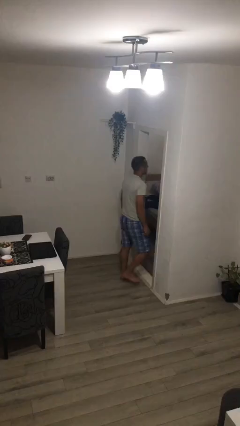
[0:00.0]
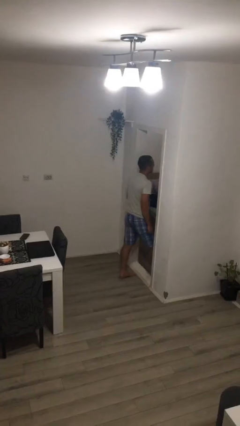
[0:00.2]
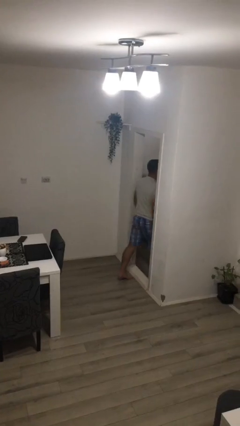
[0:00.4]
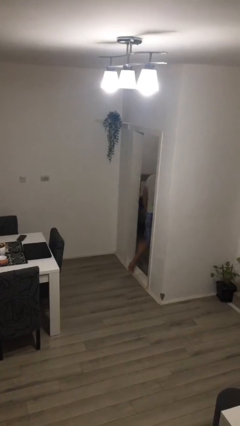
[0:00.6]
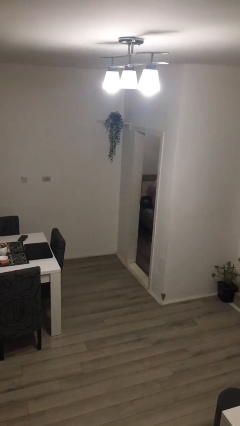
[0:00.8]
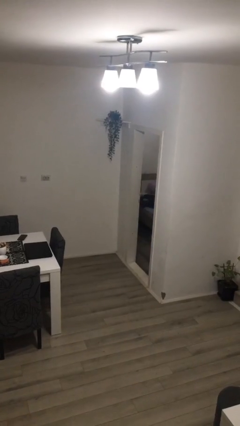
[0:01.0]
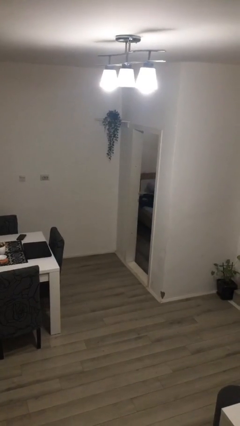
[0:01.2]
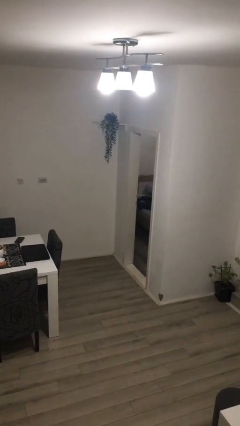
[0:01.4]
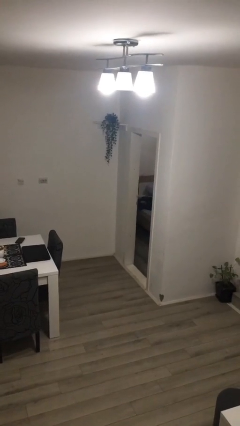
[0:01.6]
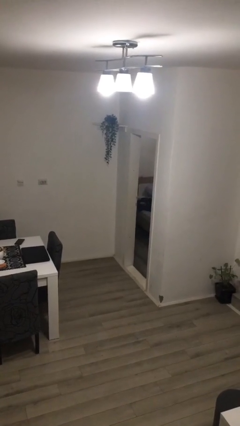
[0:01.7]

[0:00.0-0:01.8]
person exits scene through structure

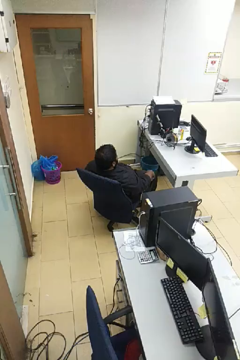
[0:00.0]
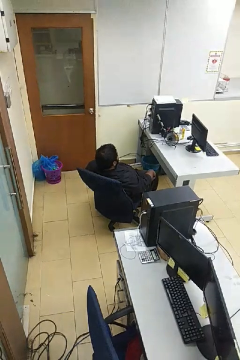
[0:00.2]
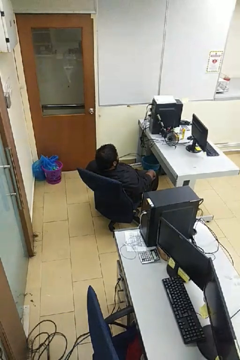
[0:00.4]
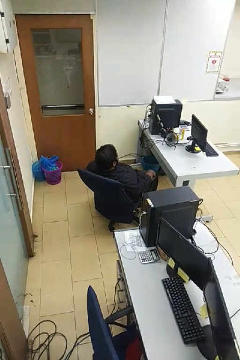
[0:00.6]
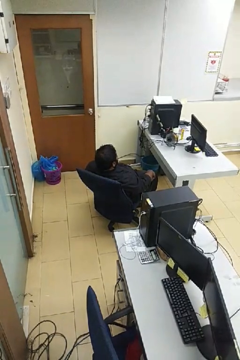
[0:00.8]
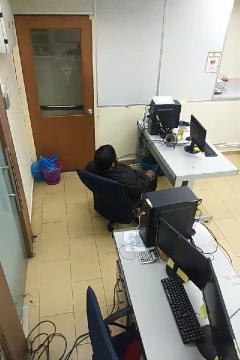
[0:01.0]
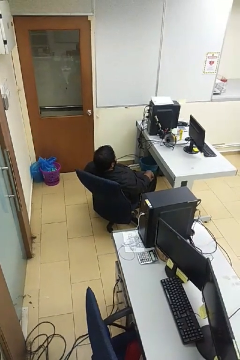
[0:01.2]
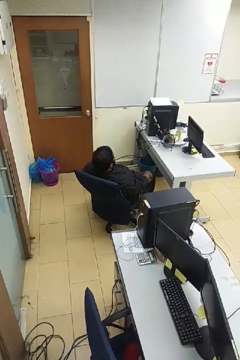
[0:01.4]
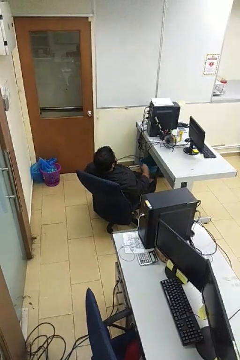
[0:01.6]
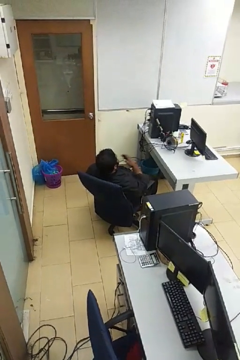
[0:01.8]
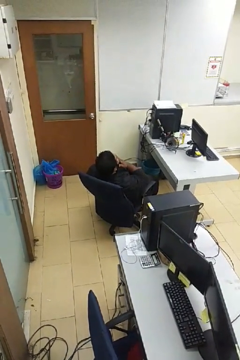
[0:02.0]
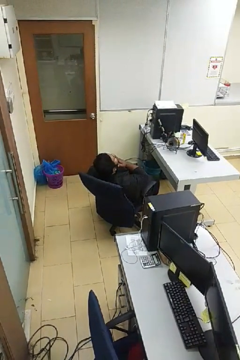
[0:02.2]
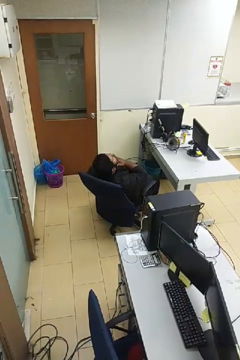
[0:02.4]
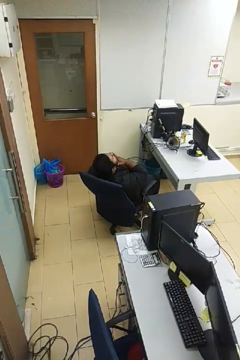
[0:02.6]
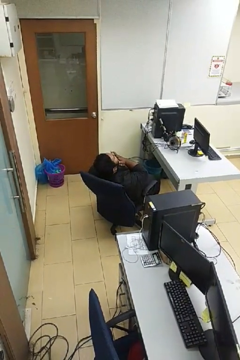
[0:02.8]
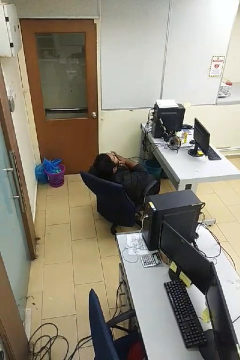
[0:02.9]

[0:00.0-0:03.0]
person yawns

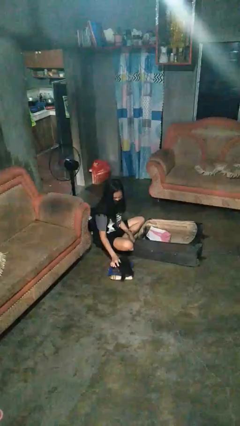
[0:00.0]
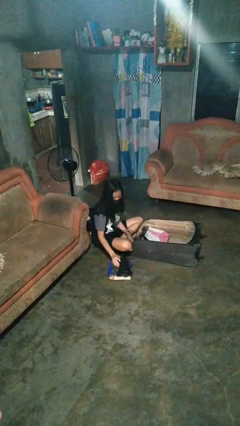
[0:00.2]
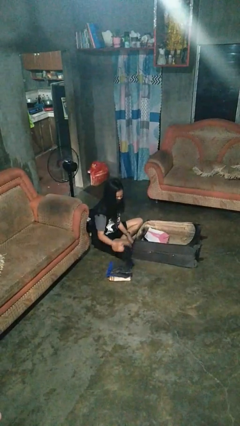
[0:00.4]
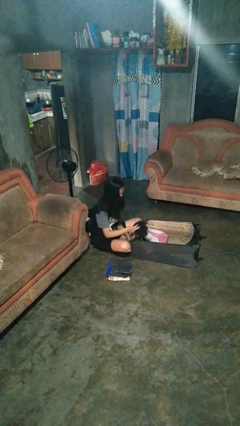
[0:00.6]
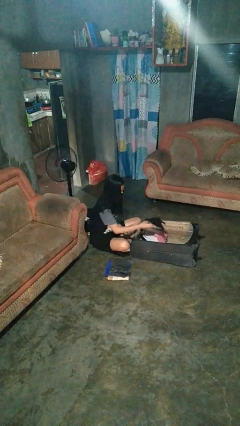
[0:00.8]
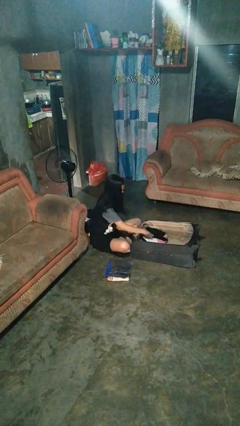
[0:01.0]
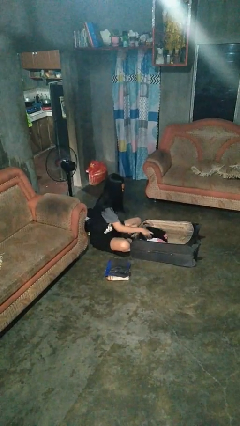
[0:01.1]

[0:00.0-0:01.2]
person loads clothes into suitcase

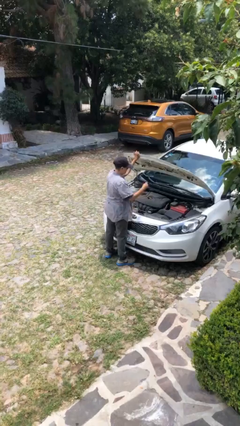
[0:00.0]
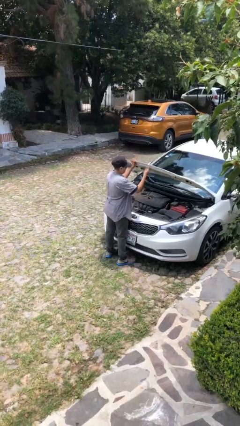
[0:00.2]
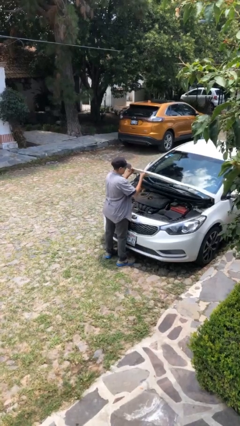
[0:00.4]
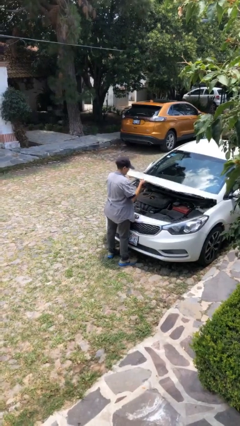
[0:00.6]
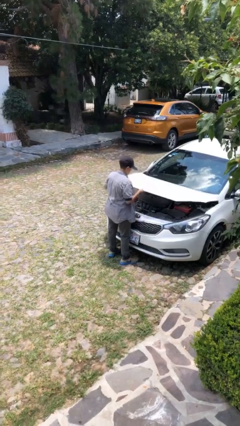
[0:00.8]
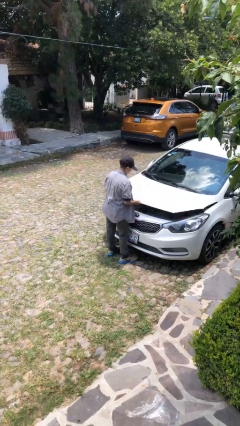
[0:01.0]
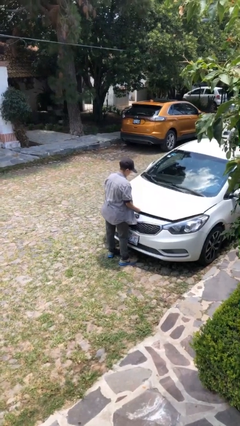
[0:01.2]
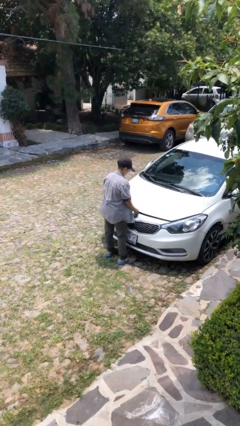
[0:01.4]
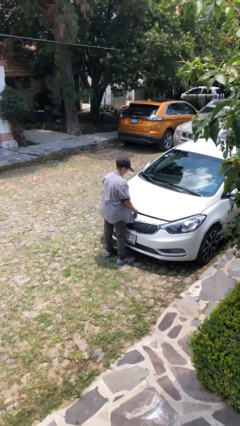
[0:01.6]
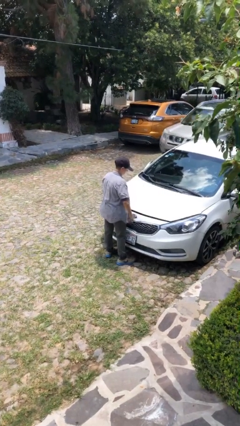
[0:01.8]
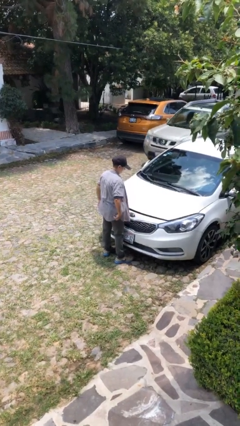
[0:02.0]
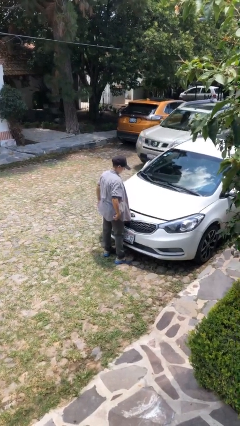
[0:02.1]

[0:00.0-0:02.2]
person closes car hood

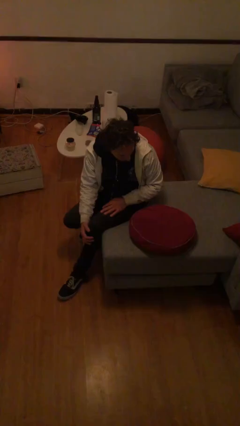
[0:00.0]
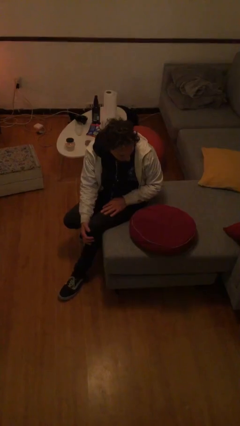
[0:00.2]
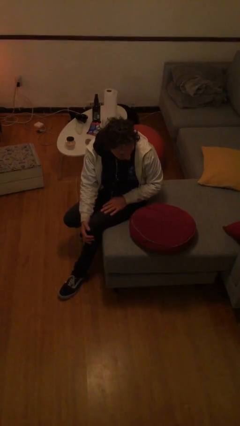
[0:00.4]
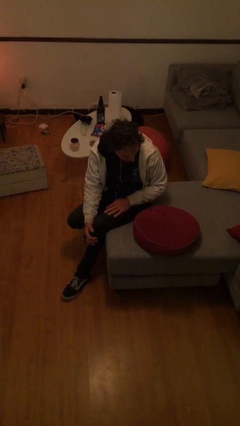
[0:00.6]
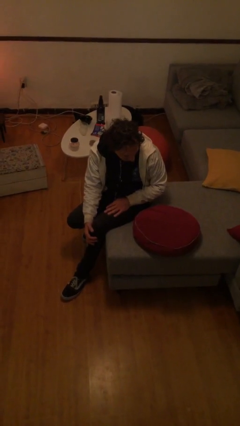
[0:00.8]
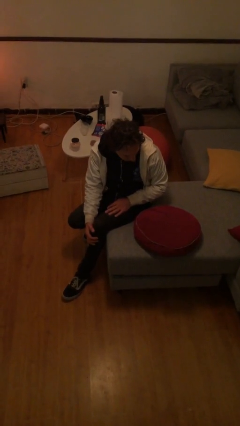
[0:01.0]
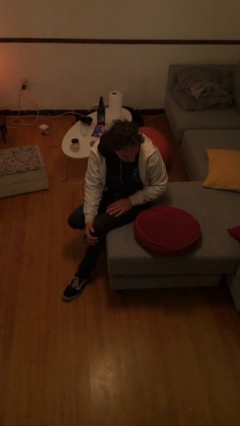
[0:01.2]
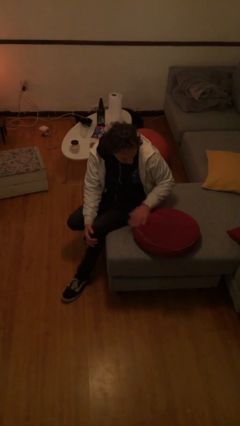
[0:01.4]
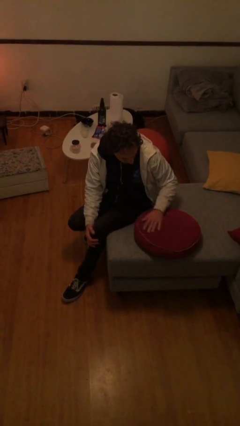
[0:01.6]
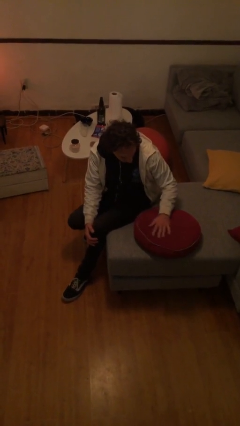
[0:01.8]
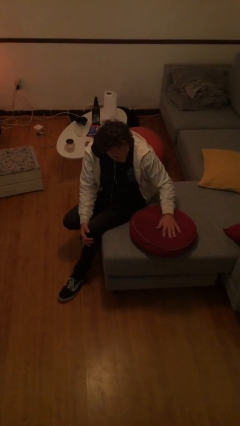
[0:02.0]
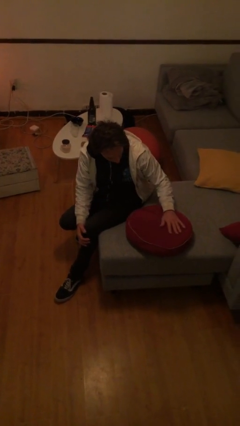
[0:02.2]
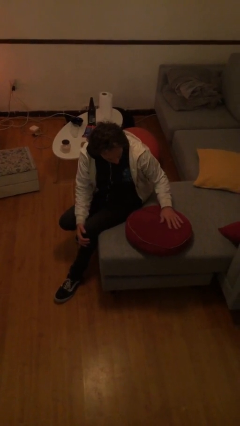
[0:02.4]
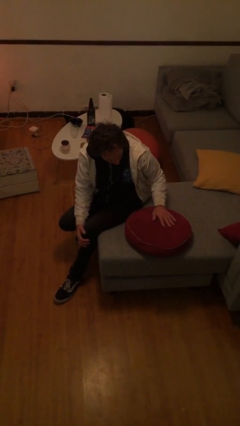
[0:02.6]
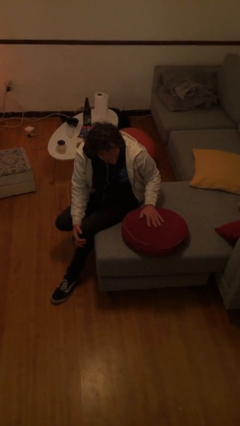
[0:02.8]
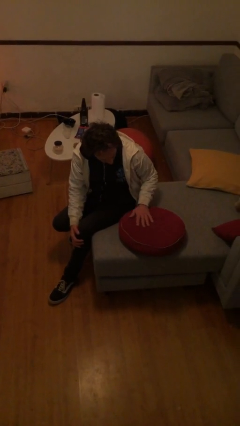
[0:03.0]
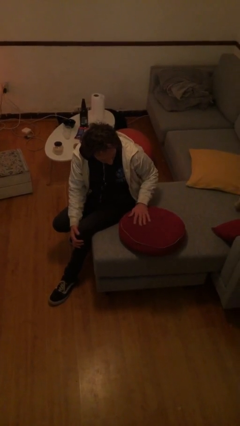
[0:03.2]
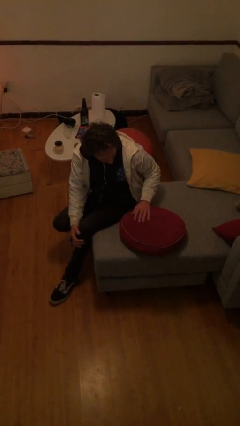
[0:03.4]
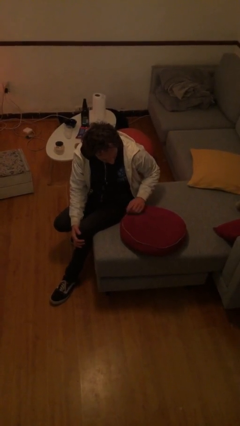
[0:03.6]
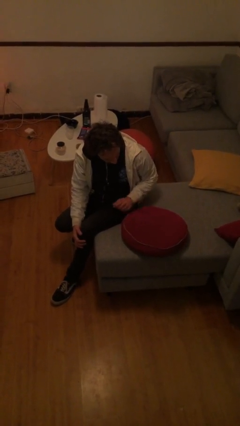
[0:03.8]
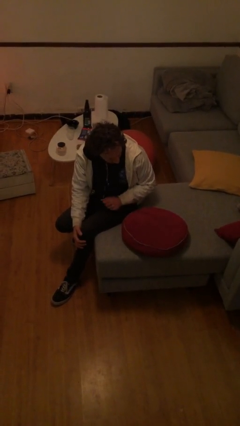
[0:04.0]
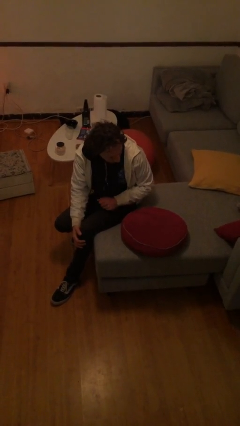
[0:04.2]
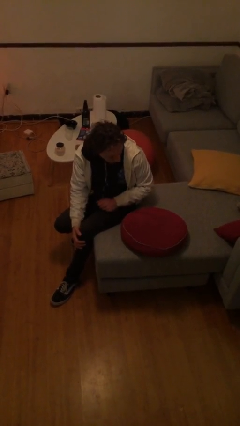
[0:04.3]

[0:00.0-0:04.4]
person waves hand over object

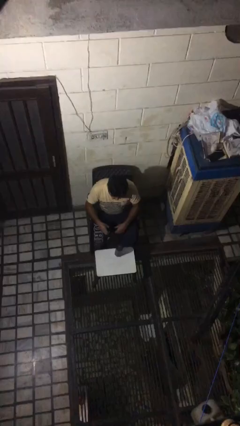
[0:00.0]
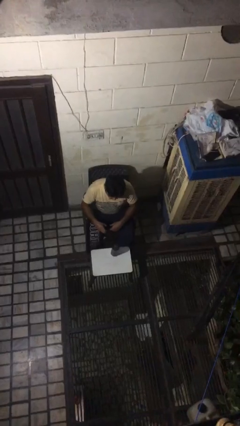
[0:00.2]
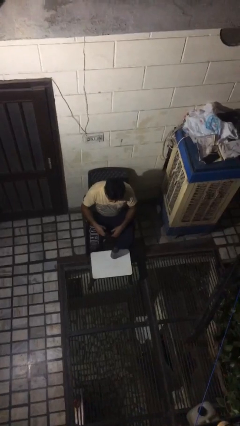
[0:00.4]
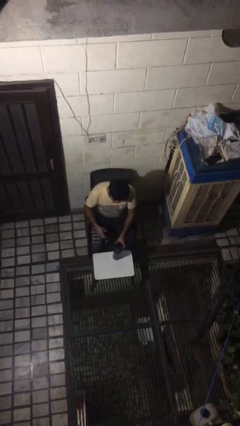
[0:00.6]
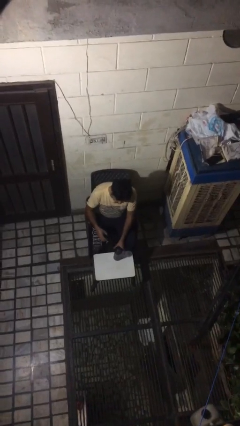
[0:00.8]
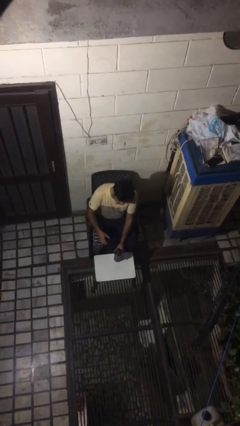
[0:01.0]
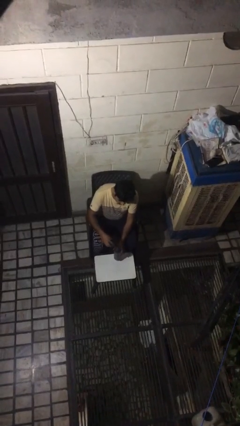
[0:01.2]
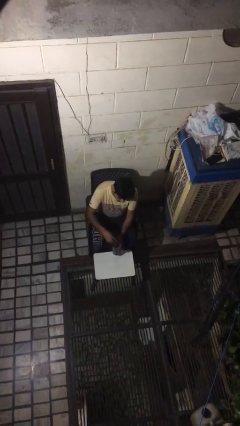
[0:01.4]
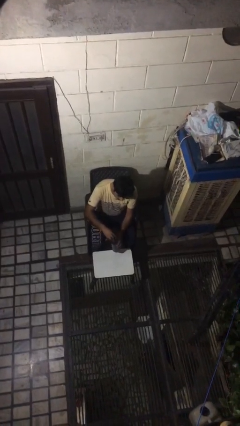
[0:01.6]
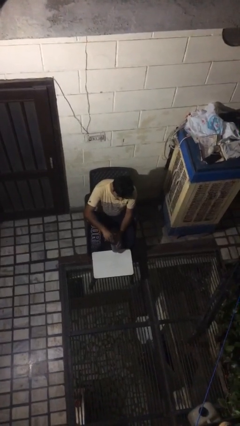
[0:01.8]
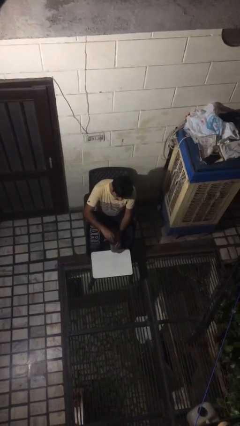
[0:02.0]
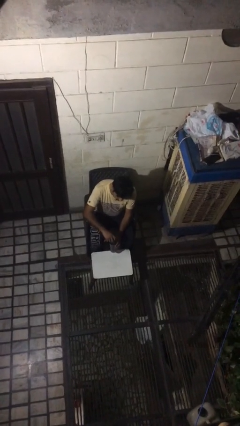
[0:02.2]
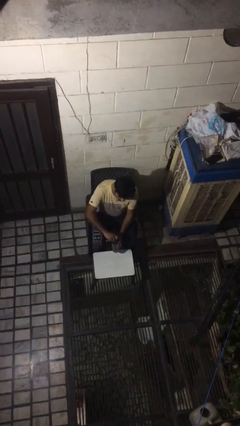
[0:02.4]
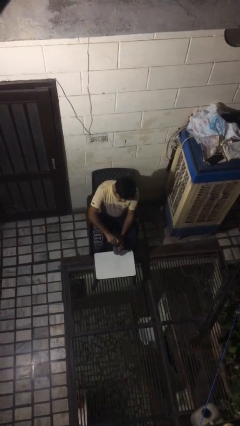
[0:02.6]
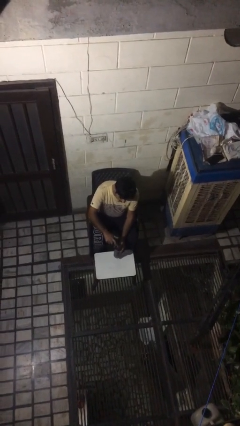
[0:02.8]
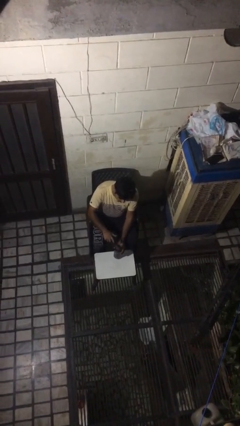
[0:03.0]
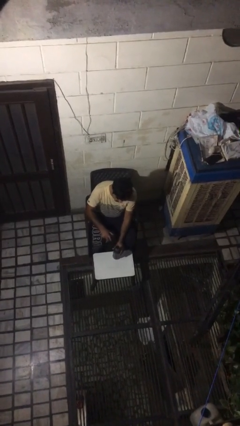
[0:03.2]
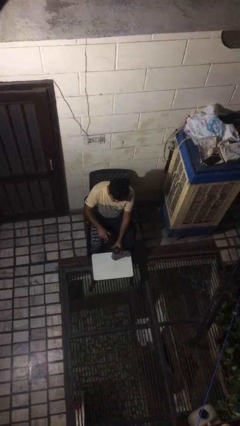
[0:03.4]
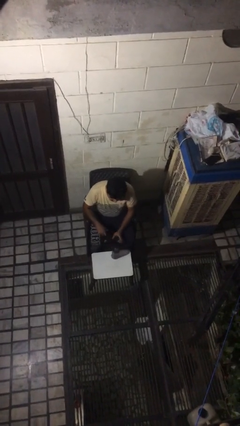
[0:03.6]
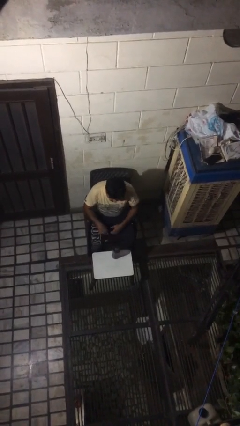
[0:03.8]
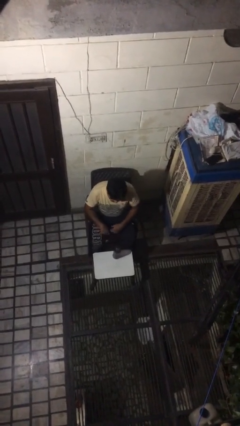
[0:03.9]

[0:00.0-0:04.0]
person screws lid to bottle

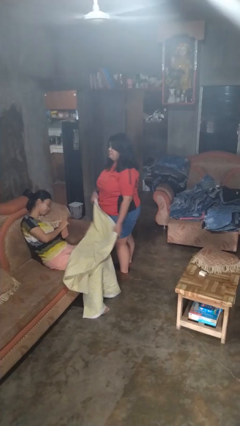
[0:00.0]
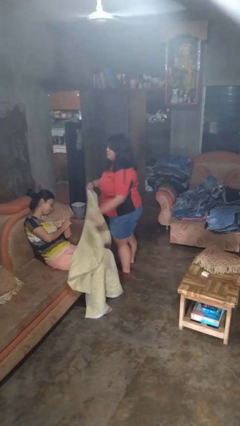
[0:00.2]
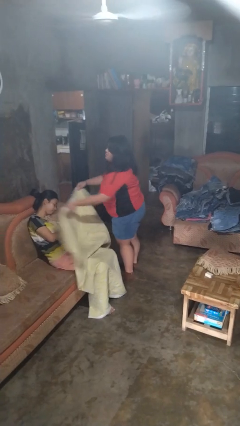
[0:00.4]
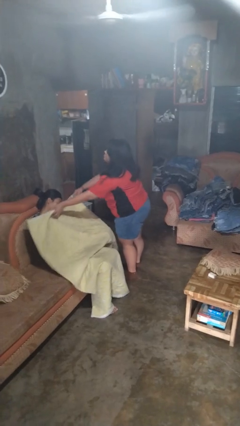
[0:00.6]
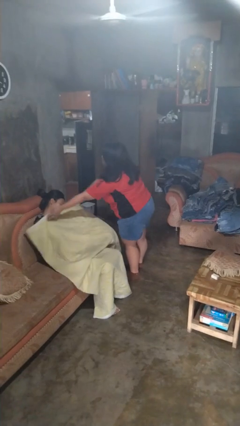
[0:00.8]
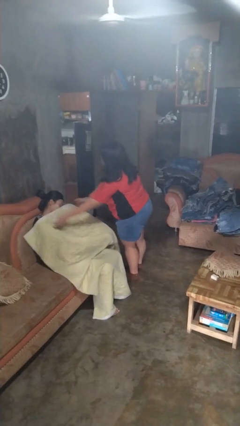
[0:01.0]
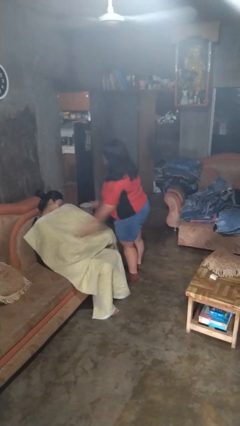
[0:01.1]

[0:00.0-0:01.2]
person covers friend with blanket
